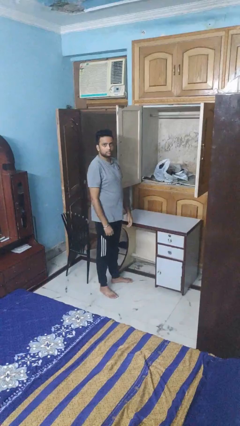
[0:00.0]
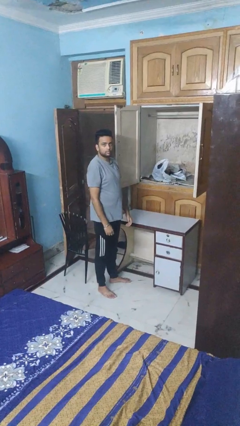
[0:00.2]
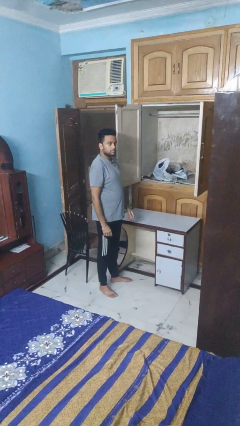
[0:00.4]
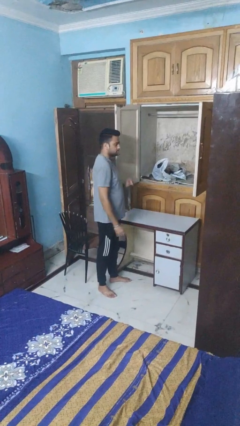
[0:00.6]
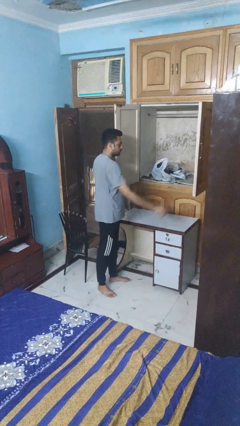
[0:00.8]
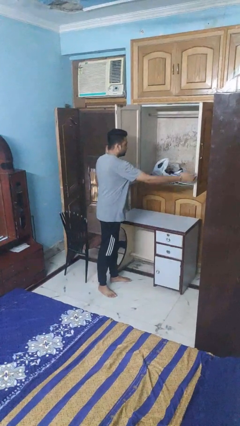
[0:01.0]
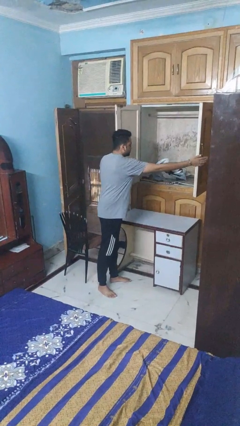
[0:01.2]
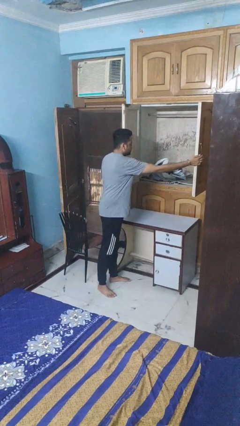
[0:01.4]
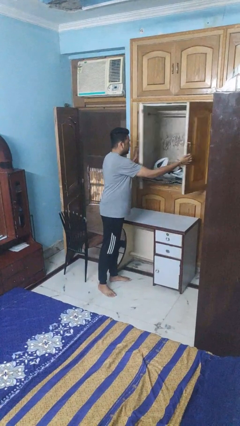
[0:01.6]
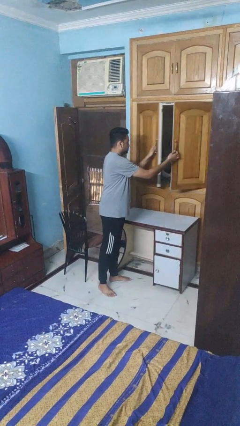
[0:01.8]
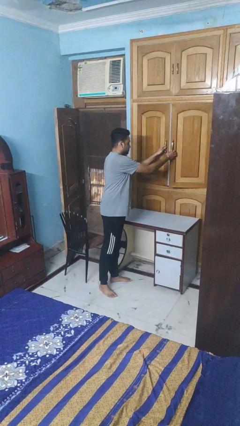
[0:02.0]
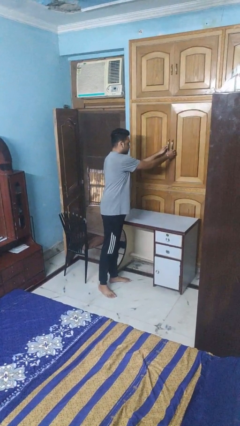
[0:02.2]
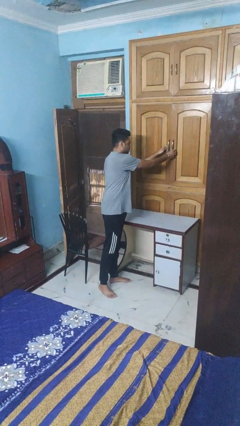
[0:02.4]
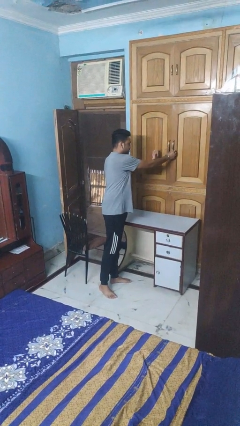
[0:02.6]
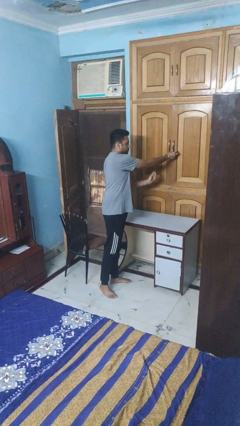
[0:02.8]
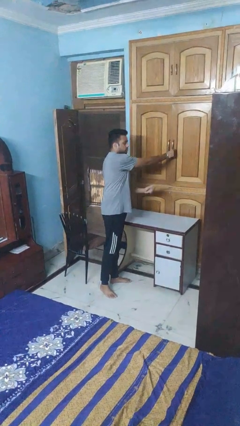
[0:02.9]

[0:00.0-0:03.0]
person closes closet door

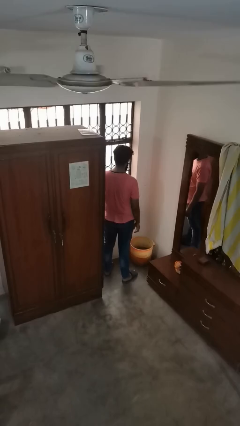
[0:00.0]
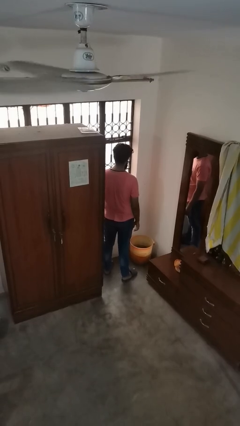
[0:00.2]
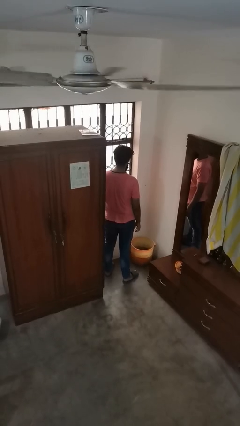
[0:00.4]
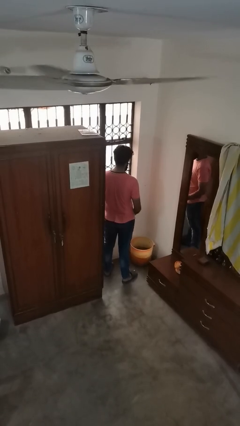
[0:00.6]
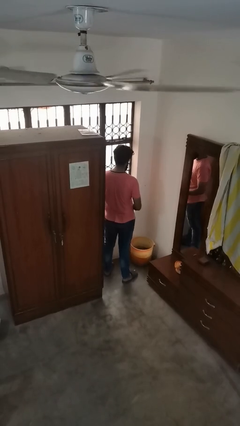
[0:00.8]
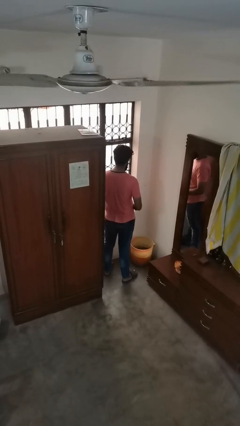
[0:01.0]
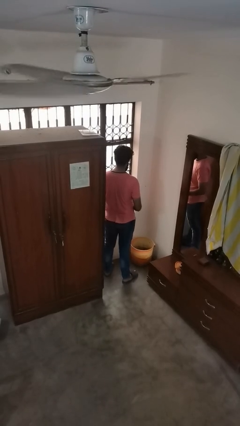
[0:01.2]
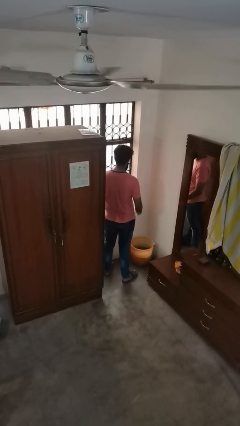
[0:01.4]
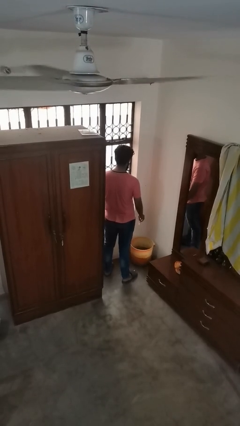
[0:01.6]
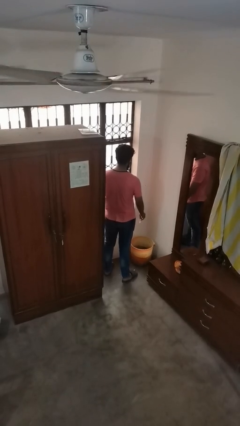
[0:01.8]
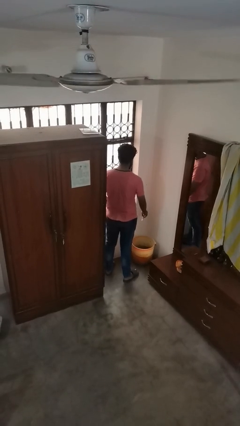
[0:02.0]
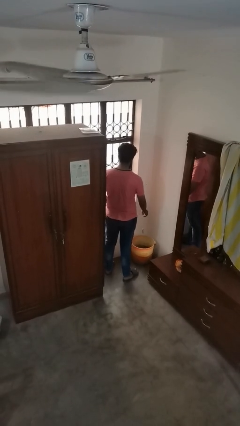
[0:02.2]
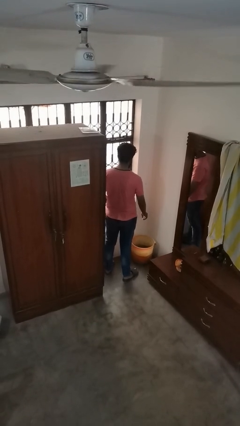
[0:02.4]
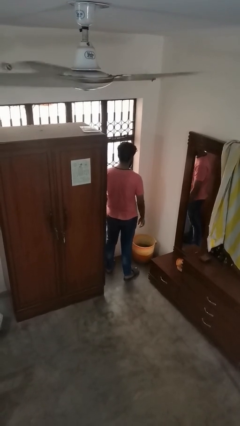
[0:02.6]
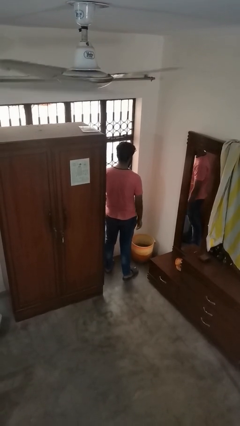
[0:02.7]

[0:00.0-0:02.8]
person discards trash

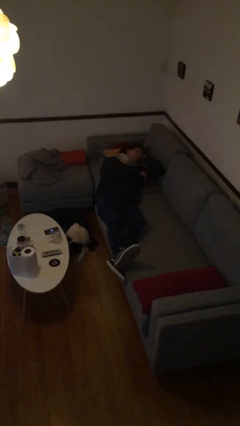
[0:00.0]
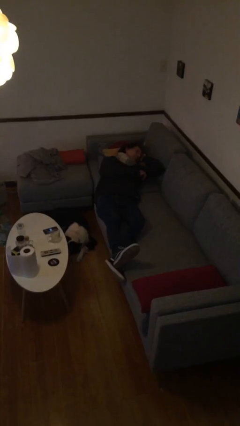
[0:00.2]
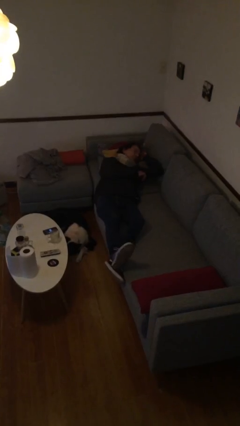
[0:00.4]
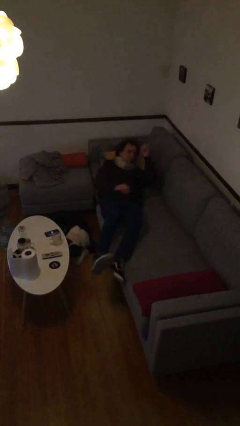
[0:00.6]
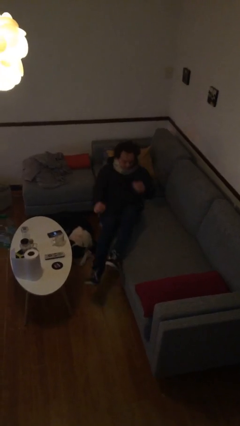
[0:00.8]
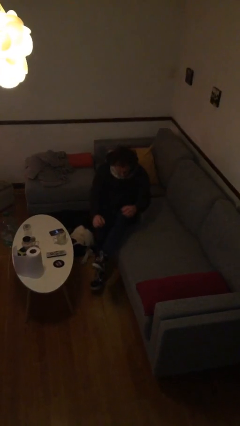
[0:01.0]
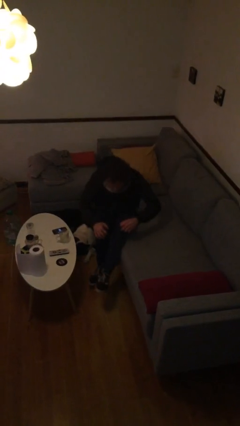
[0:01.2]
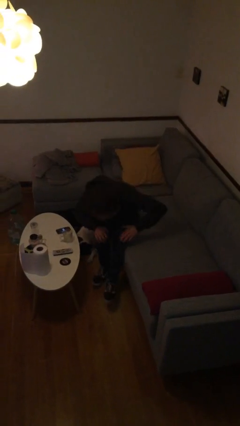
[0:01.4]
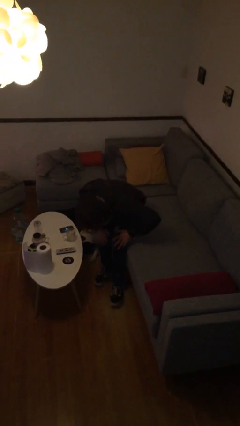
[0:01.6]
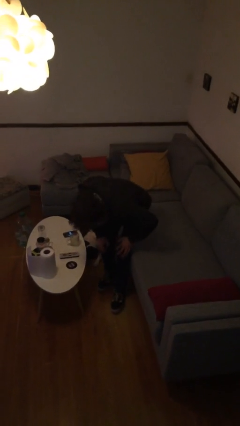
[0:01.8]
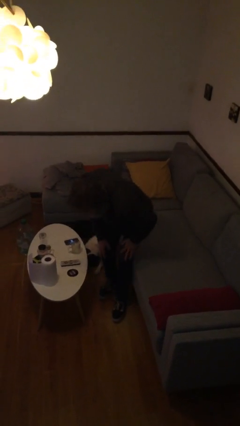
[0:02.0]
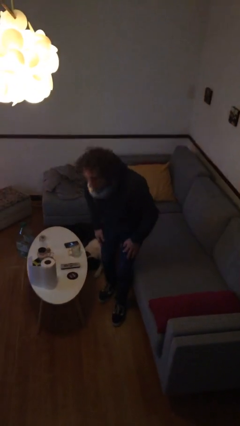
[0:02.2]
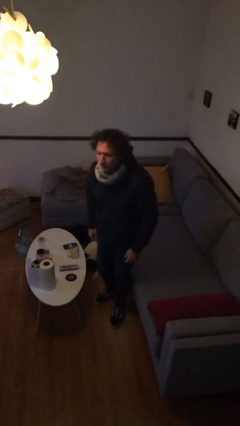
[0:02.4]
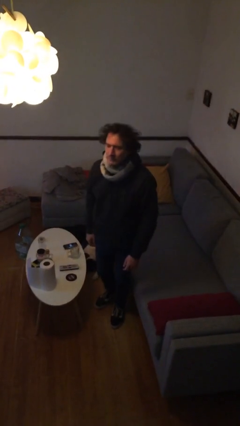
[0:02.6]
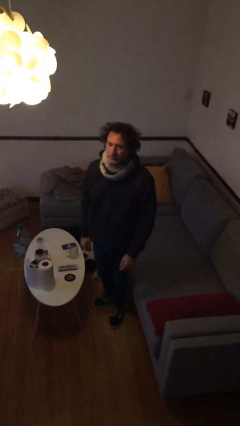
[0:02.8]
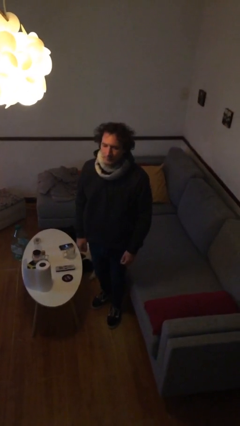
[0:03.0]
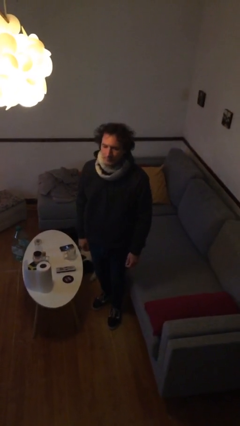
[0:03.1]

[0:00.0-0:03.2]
person stands up

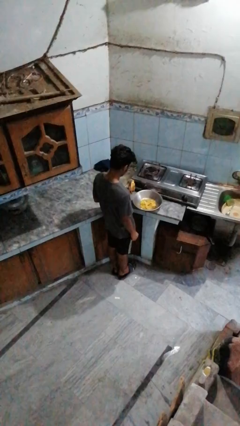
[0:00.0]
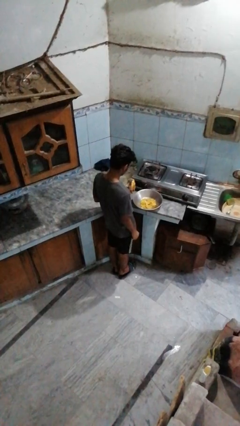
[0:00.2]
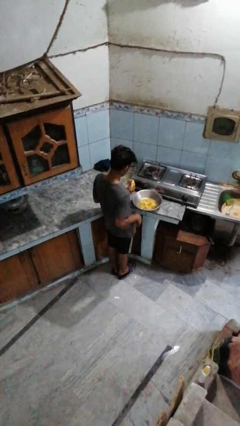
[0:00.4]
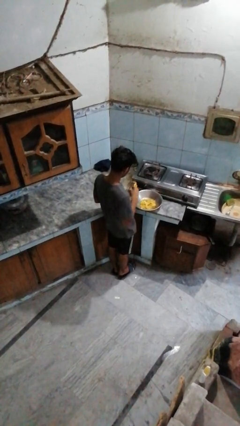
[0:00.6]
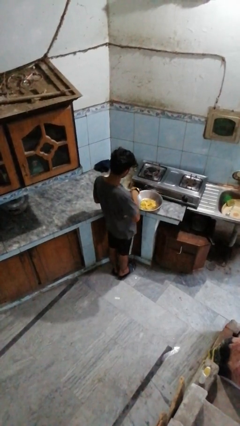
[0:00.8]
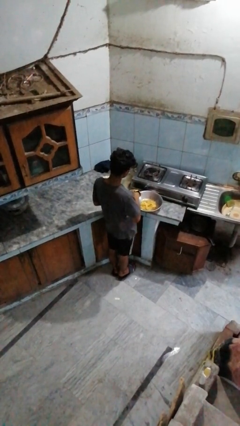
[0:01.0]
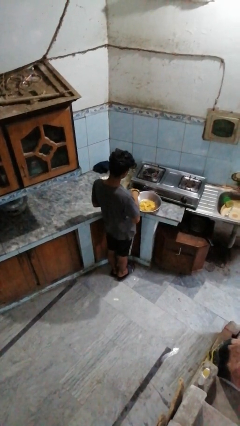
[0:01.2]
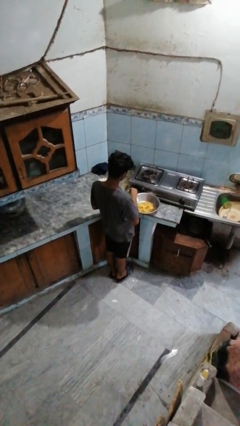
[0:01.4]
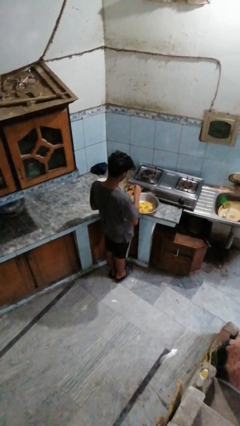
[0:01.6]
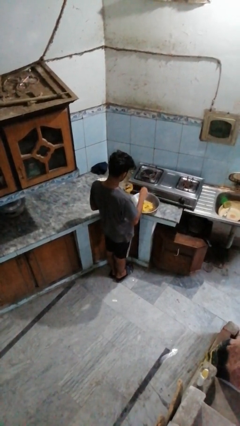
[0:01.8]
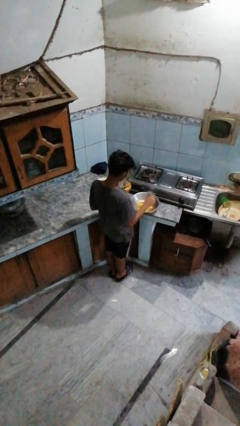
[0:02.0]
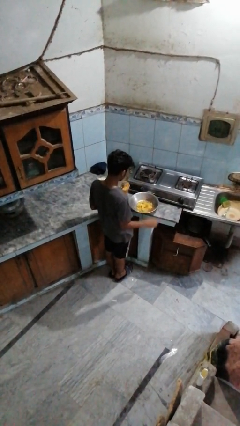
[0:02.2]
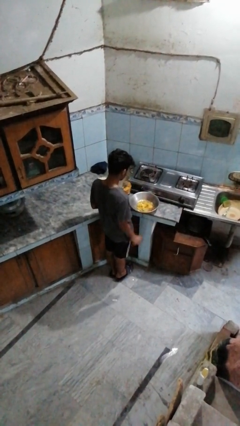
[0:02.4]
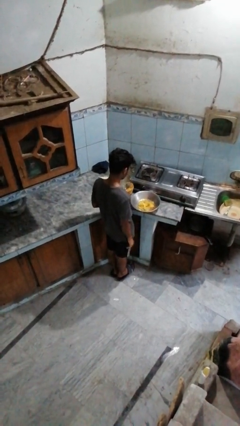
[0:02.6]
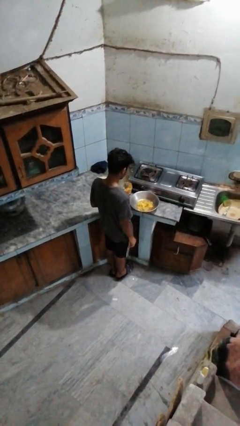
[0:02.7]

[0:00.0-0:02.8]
person pours into bowl

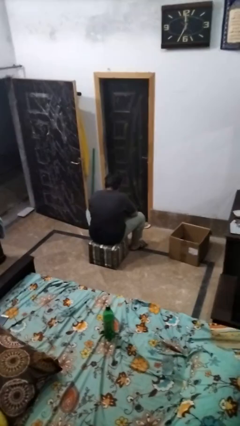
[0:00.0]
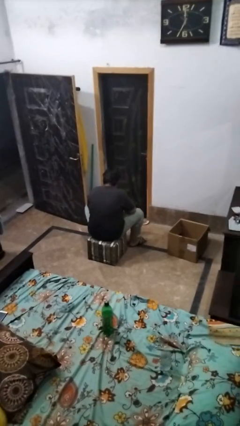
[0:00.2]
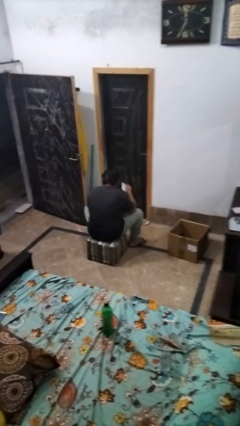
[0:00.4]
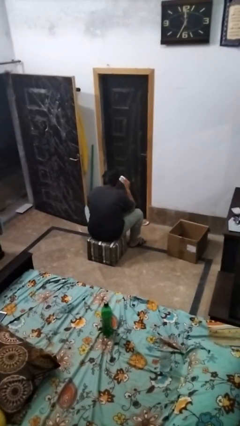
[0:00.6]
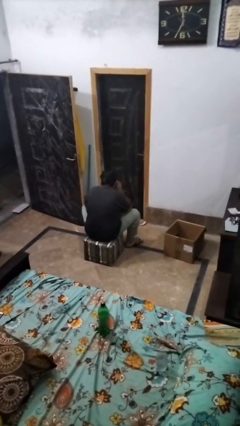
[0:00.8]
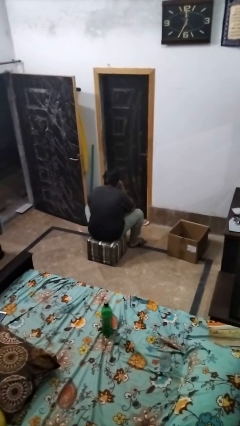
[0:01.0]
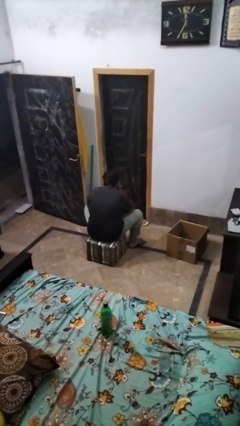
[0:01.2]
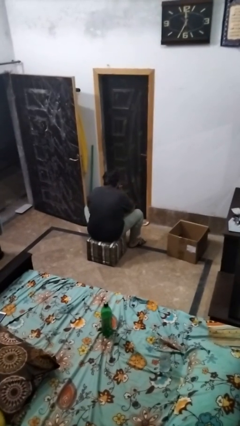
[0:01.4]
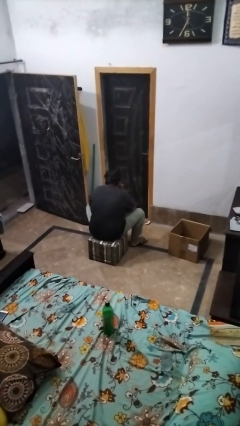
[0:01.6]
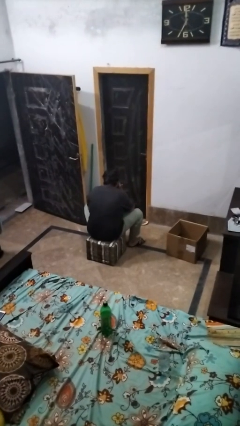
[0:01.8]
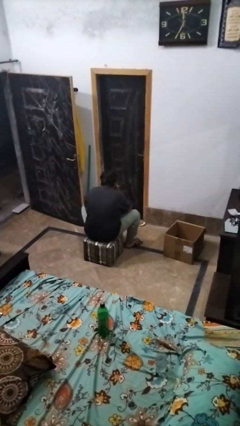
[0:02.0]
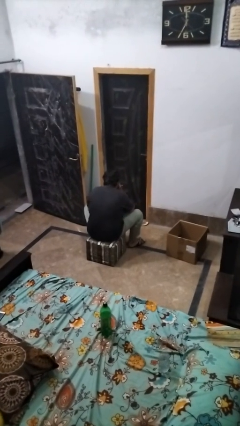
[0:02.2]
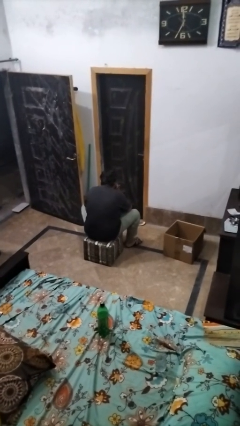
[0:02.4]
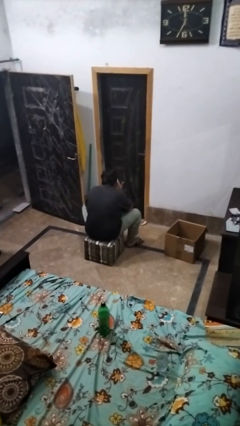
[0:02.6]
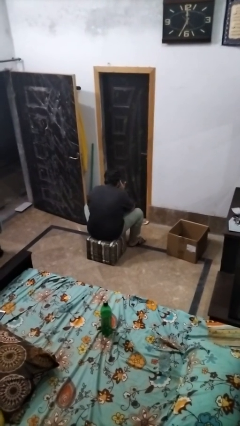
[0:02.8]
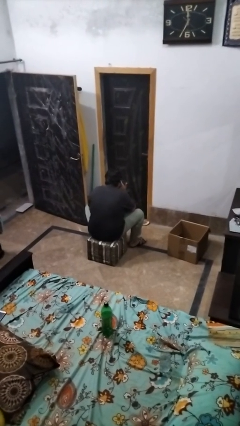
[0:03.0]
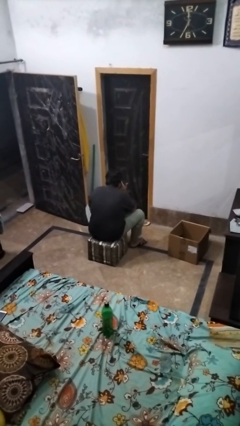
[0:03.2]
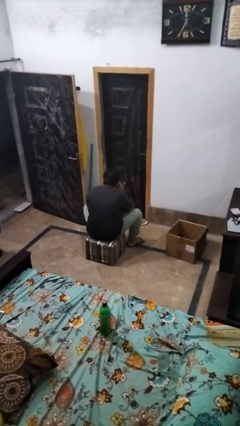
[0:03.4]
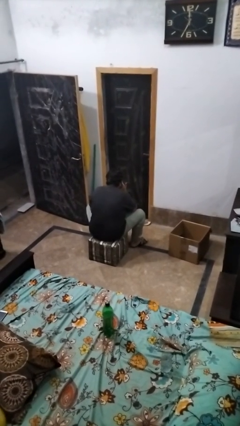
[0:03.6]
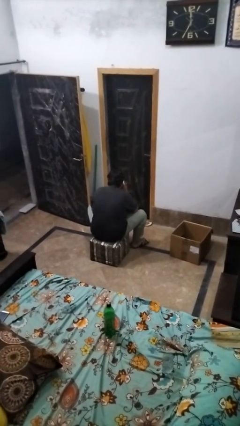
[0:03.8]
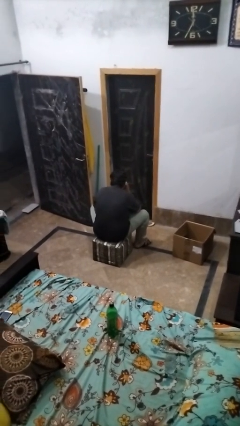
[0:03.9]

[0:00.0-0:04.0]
person blows nose

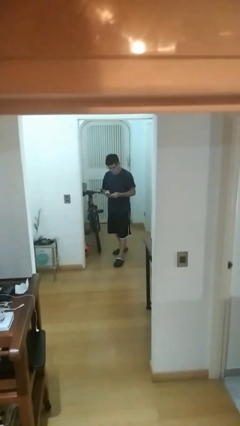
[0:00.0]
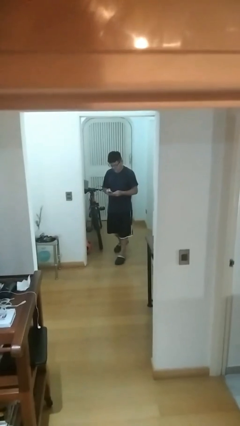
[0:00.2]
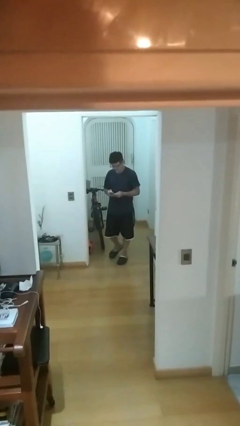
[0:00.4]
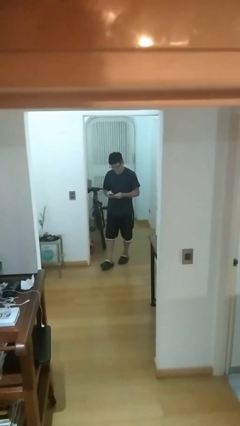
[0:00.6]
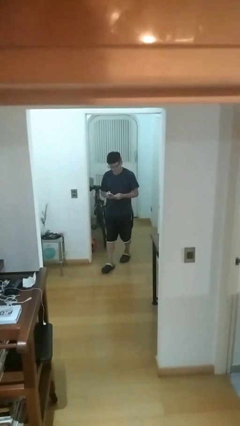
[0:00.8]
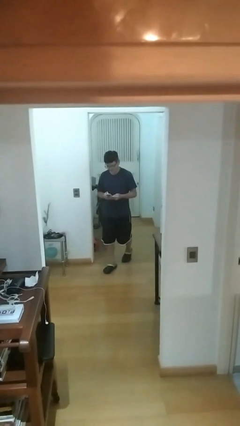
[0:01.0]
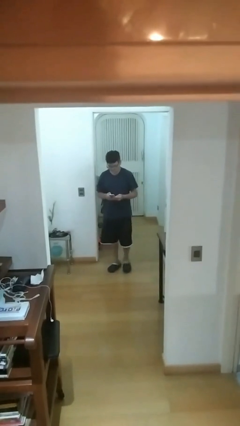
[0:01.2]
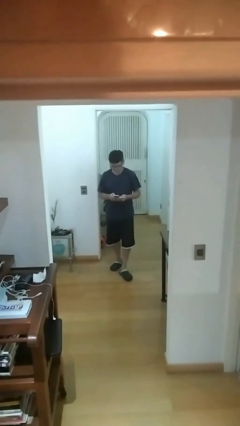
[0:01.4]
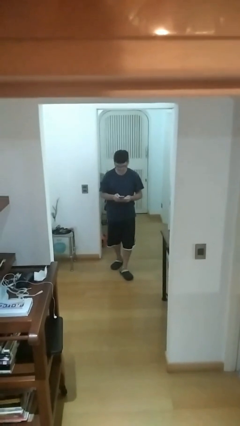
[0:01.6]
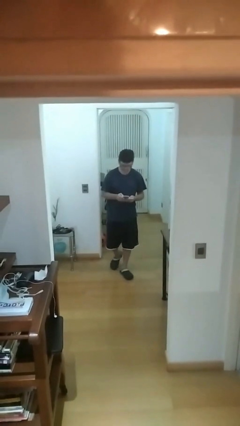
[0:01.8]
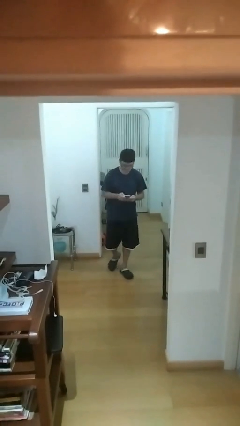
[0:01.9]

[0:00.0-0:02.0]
person enters scene through structure
